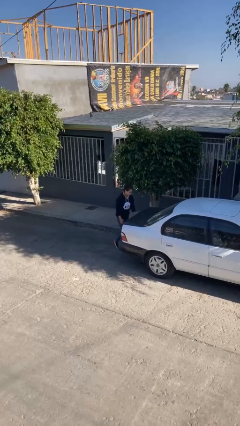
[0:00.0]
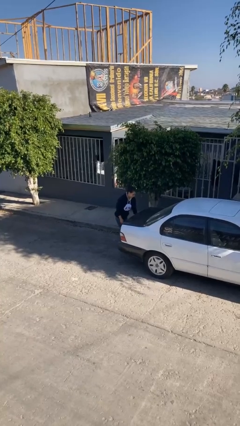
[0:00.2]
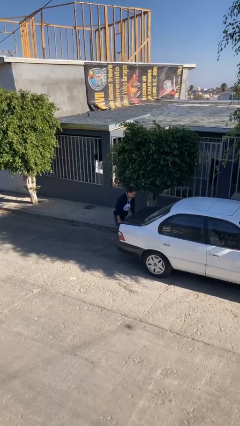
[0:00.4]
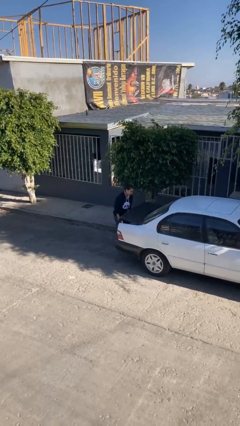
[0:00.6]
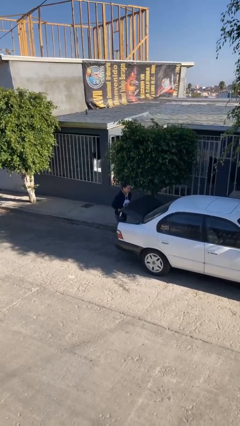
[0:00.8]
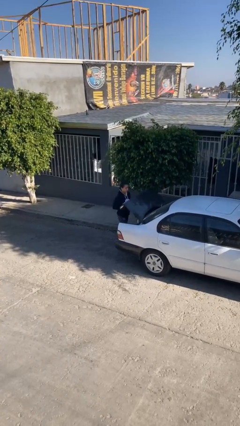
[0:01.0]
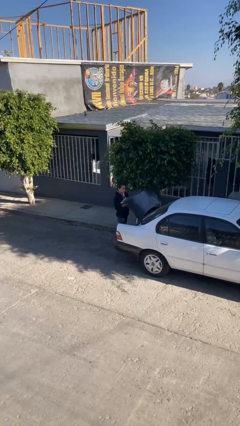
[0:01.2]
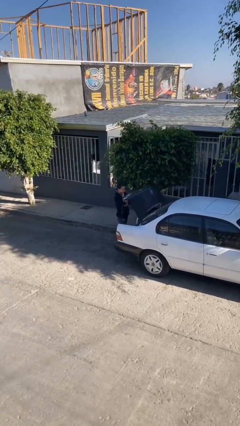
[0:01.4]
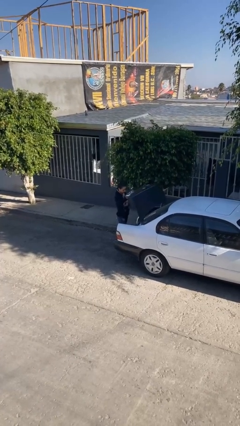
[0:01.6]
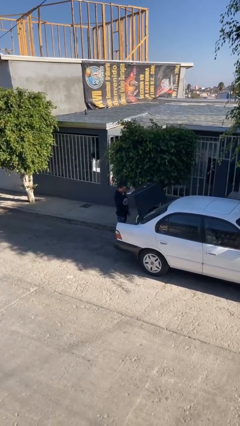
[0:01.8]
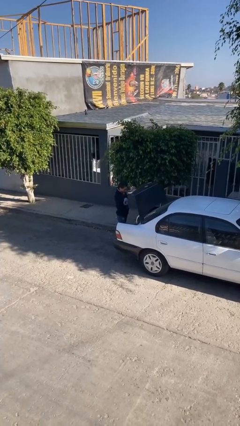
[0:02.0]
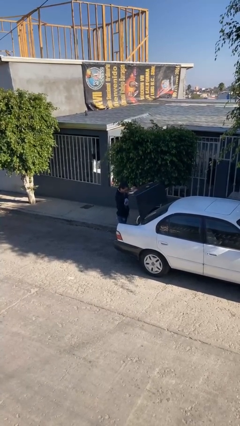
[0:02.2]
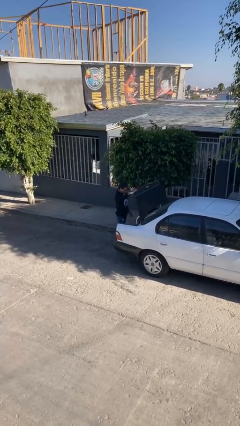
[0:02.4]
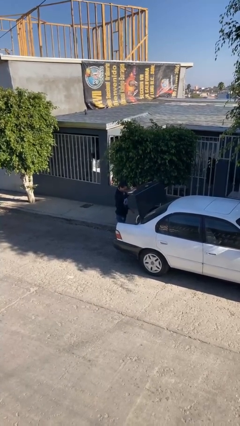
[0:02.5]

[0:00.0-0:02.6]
person opens car trunk

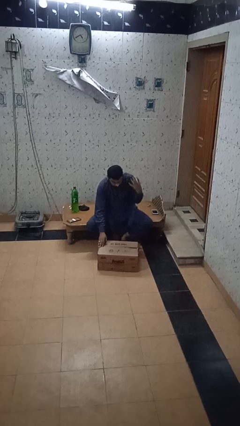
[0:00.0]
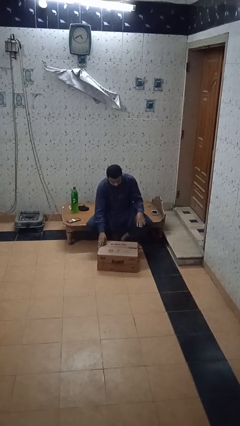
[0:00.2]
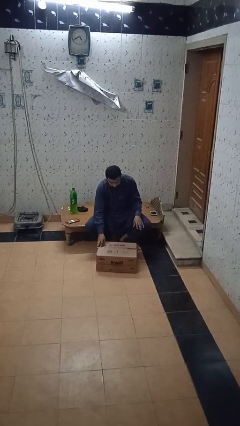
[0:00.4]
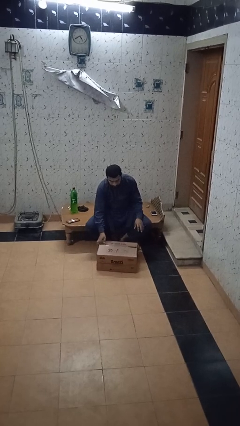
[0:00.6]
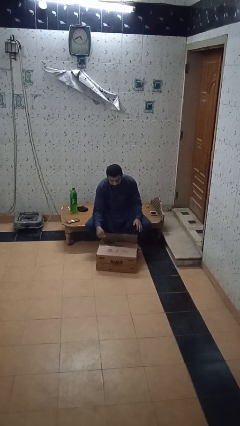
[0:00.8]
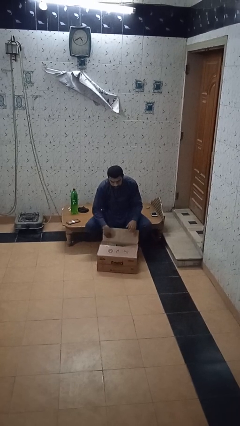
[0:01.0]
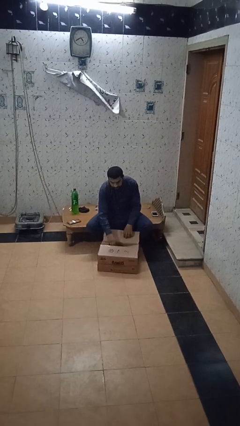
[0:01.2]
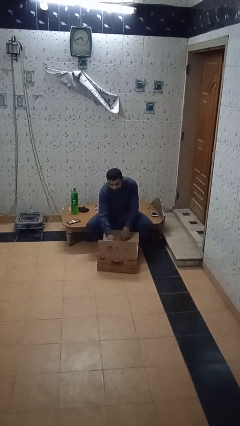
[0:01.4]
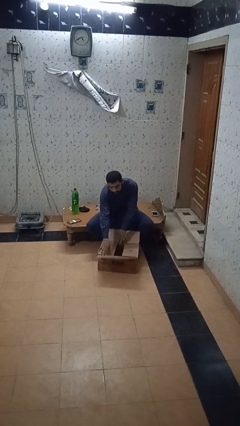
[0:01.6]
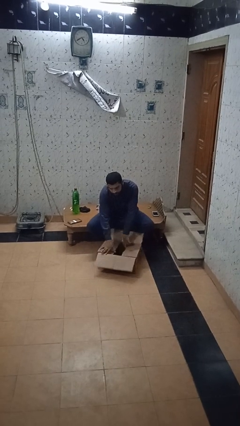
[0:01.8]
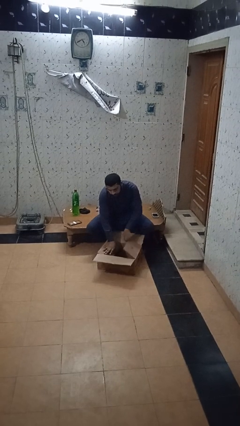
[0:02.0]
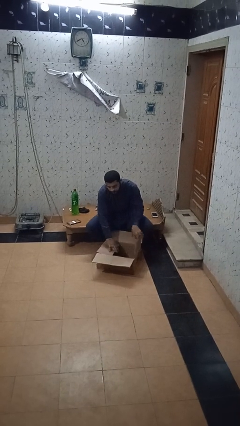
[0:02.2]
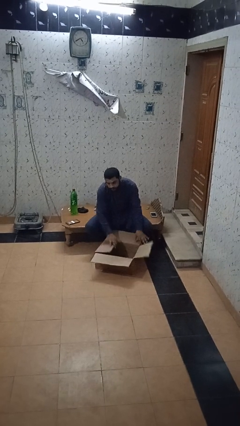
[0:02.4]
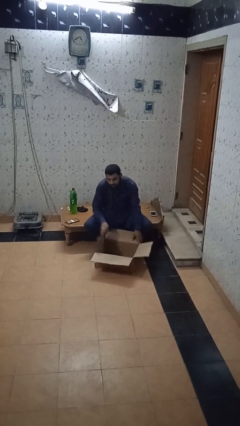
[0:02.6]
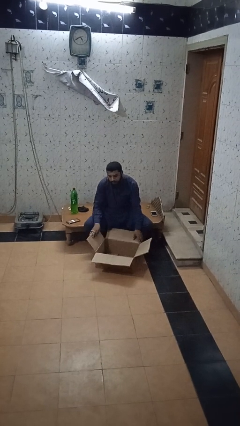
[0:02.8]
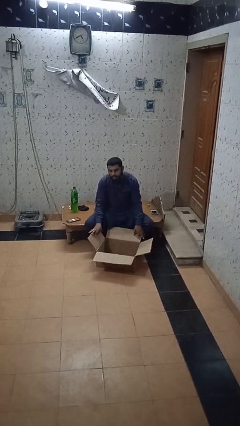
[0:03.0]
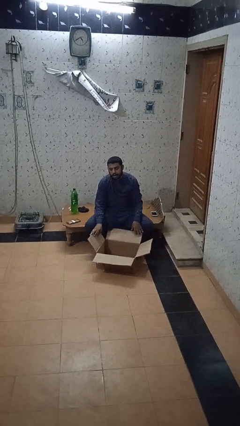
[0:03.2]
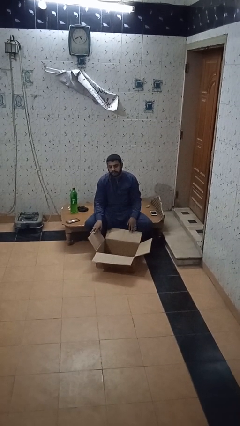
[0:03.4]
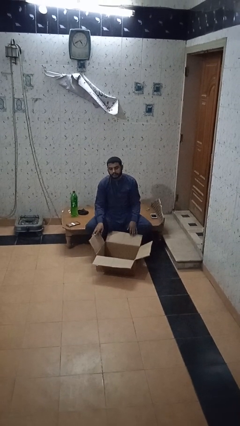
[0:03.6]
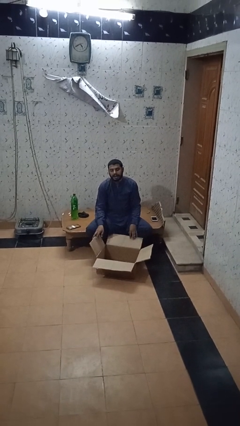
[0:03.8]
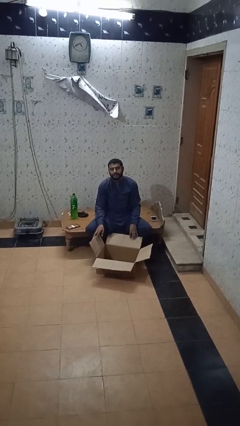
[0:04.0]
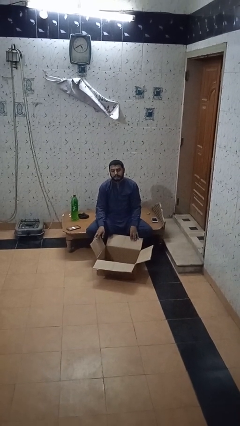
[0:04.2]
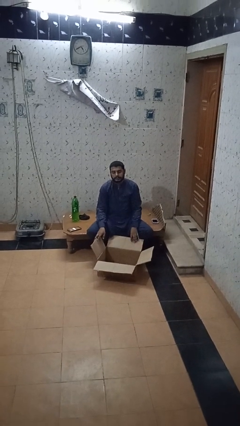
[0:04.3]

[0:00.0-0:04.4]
person opens box

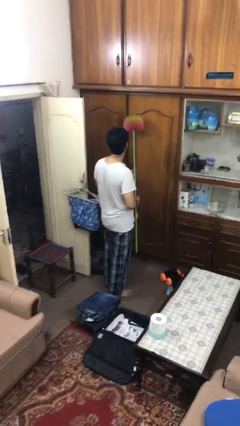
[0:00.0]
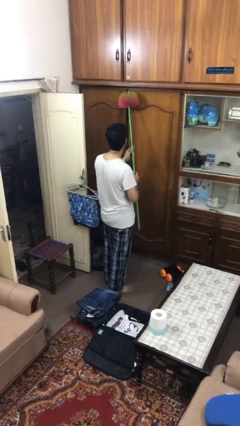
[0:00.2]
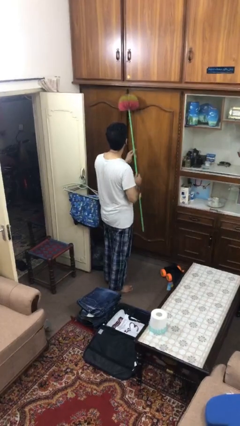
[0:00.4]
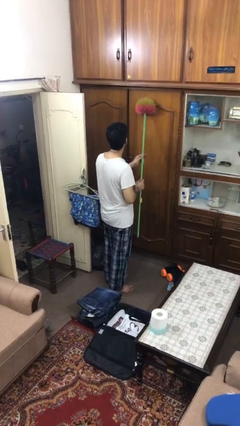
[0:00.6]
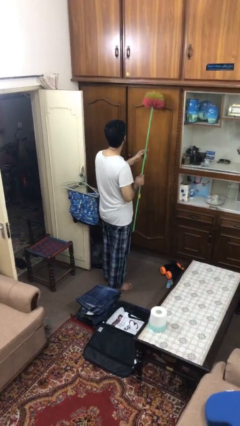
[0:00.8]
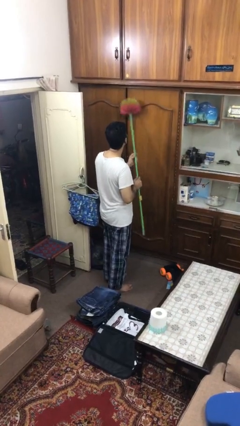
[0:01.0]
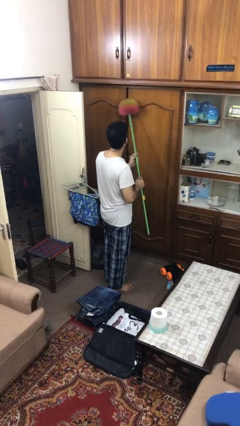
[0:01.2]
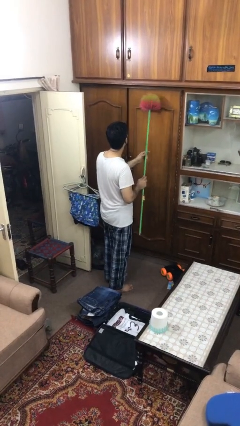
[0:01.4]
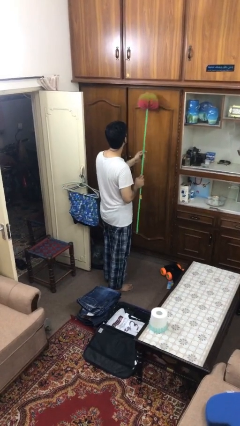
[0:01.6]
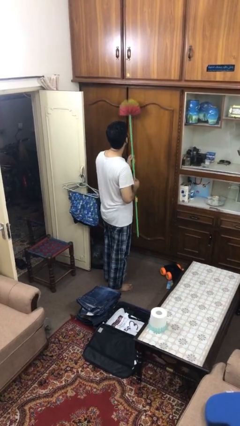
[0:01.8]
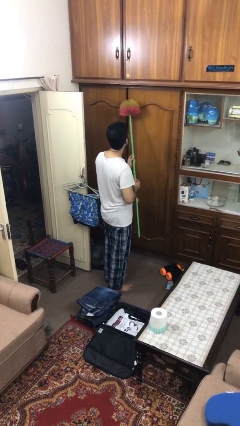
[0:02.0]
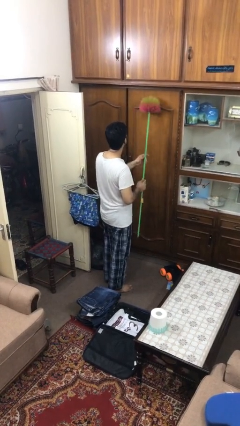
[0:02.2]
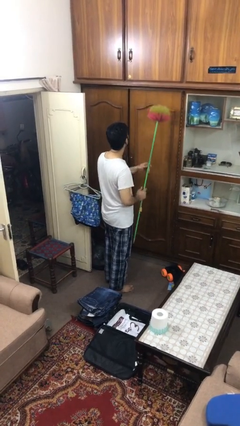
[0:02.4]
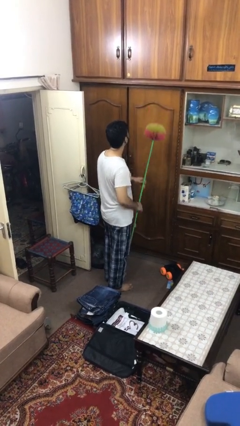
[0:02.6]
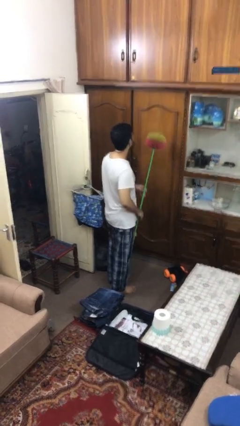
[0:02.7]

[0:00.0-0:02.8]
person dusts furniture

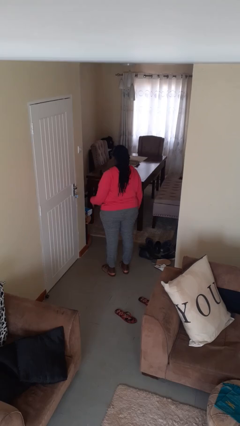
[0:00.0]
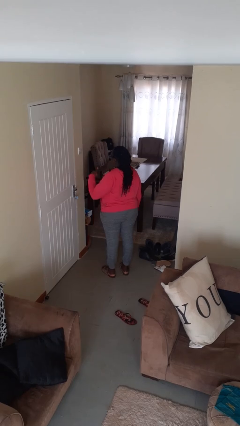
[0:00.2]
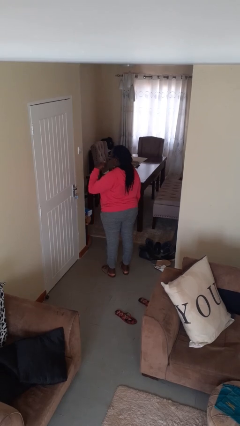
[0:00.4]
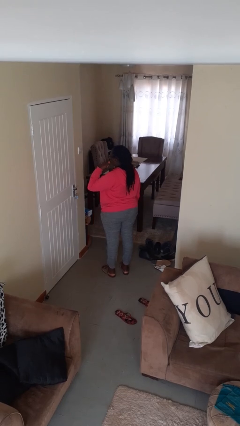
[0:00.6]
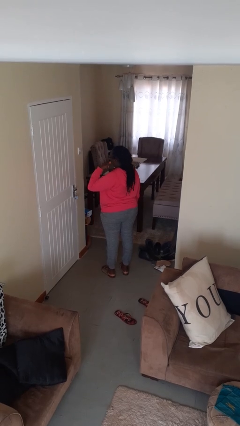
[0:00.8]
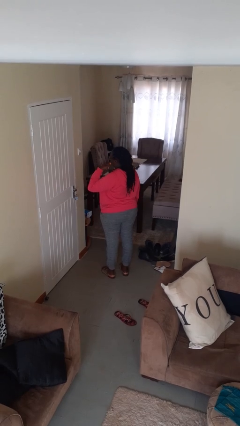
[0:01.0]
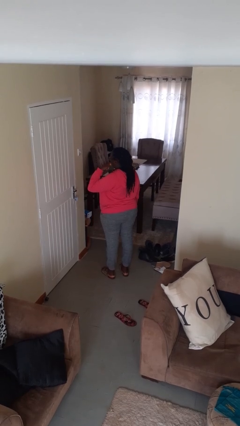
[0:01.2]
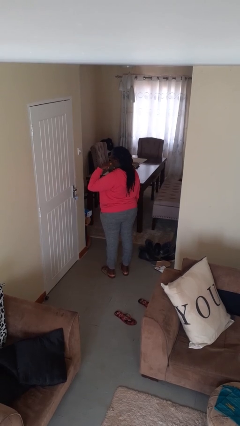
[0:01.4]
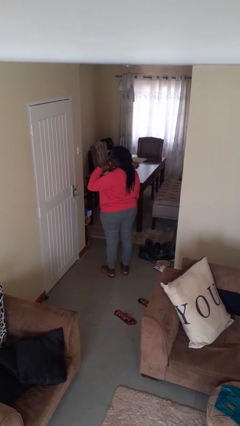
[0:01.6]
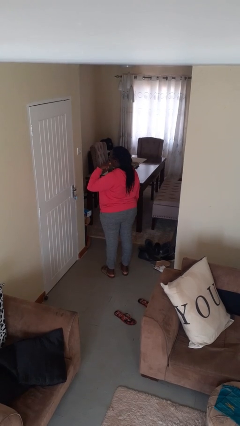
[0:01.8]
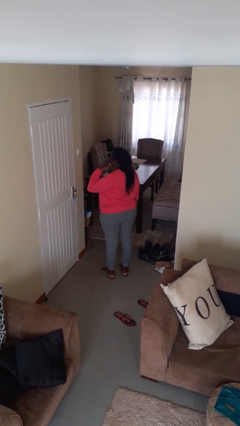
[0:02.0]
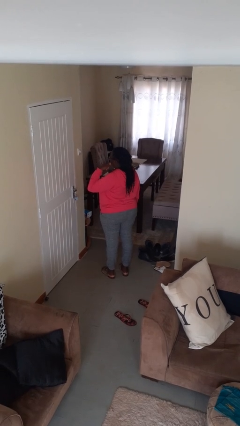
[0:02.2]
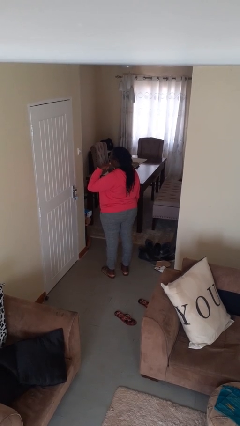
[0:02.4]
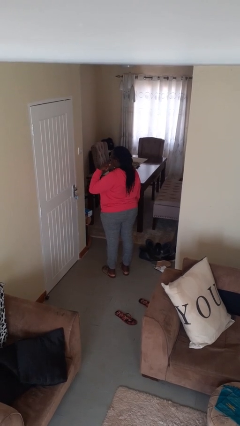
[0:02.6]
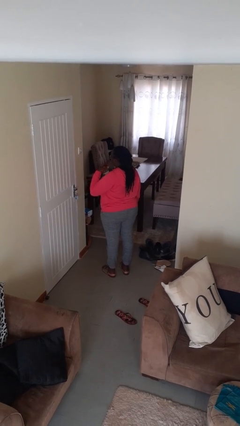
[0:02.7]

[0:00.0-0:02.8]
person gestures call me

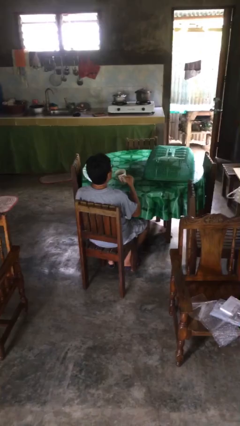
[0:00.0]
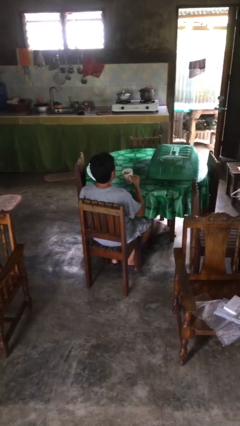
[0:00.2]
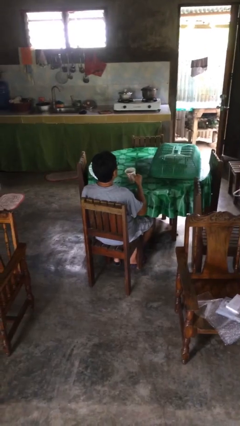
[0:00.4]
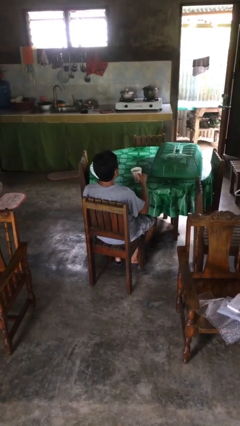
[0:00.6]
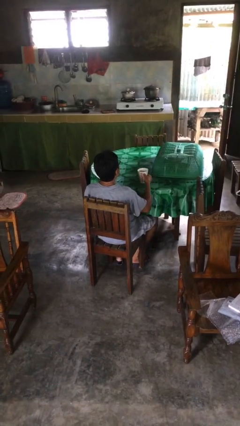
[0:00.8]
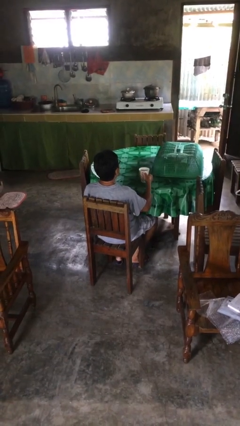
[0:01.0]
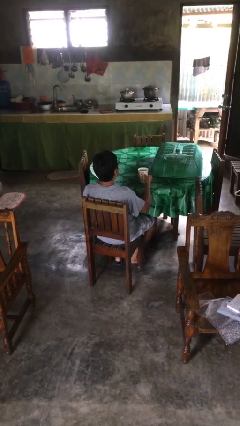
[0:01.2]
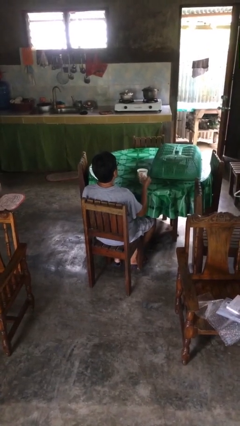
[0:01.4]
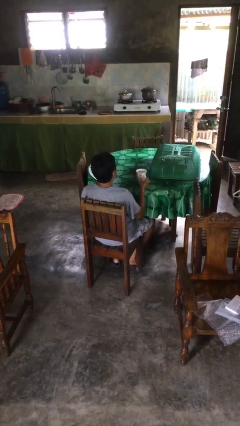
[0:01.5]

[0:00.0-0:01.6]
person puts down object on table

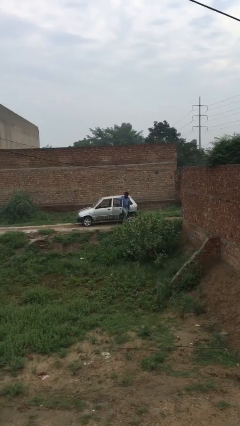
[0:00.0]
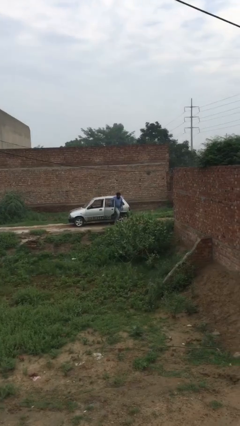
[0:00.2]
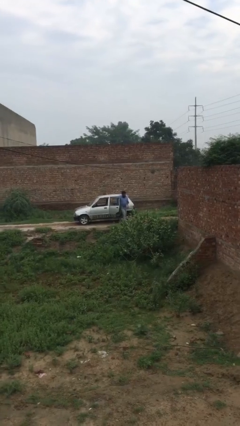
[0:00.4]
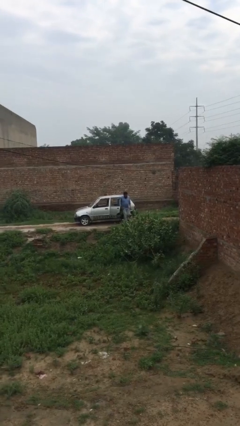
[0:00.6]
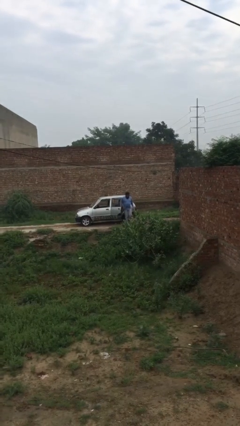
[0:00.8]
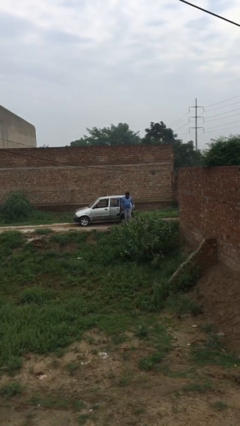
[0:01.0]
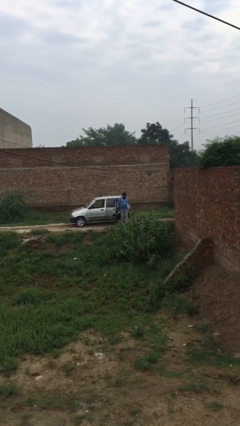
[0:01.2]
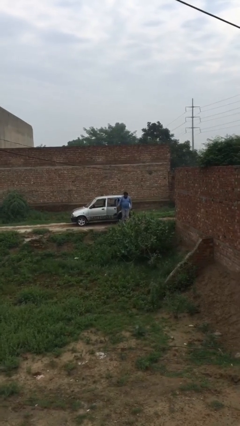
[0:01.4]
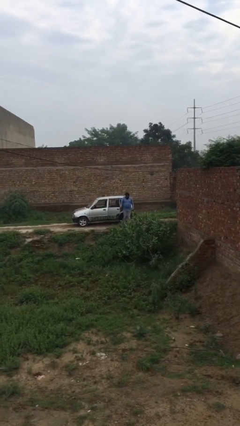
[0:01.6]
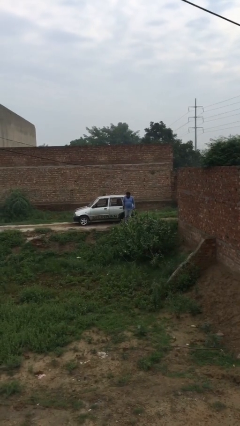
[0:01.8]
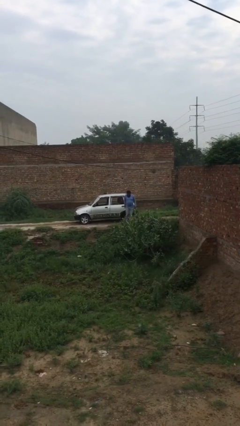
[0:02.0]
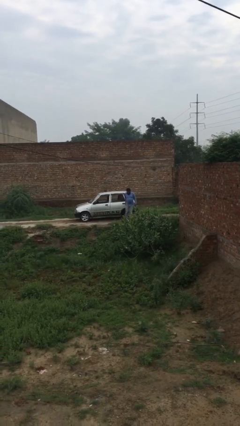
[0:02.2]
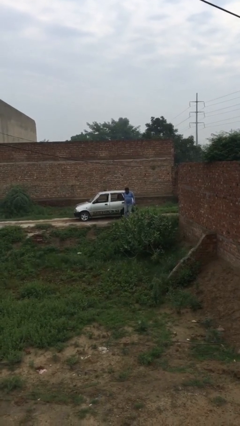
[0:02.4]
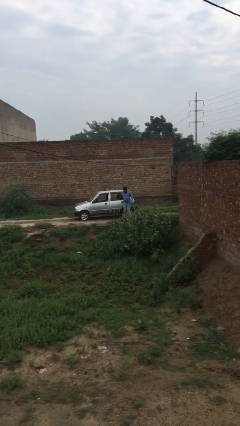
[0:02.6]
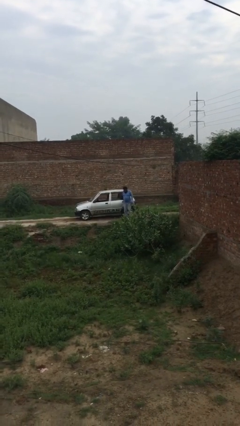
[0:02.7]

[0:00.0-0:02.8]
person closes car door
